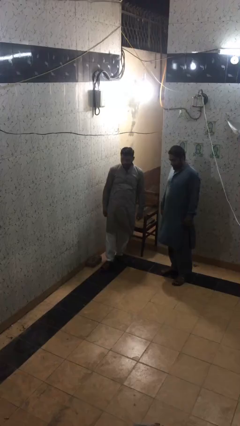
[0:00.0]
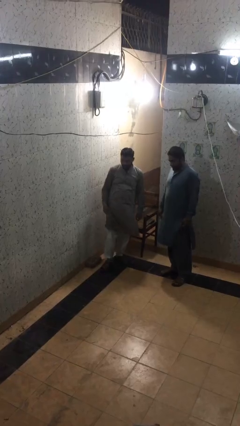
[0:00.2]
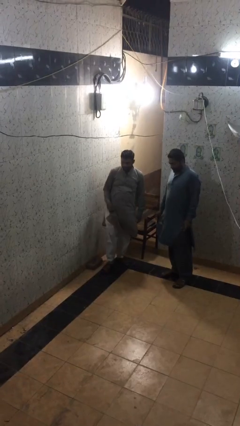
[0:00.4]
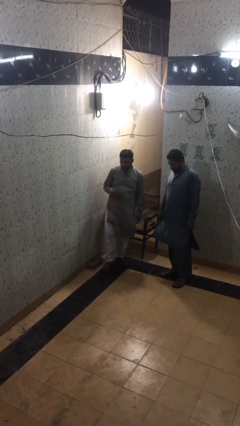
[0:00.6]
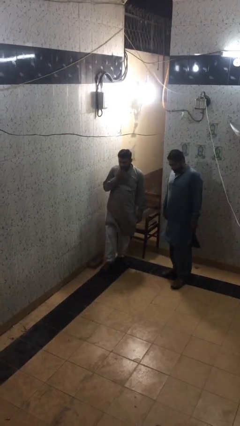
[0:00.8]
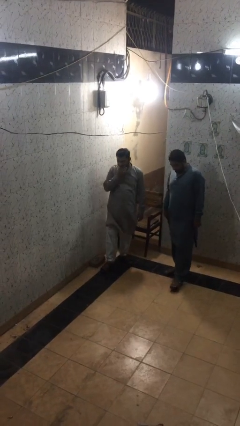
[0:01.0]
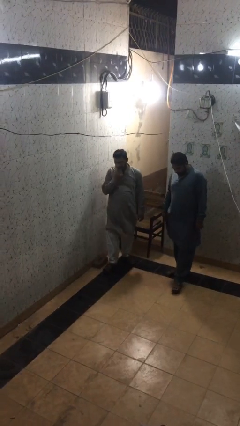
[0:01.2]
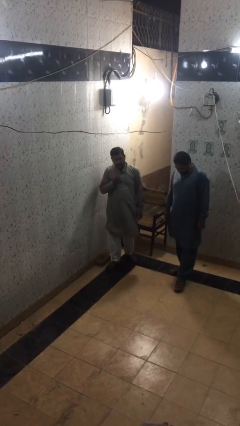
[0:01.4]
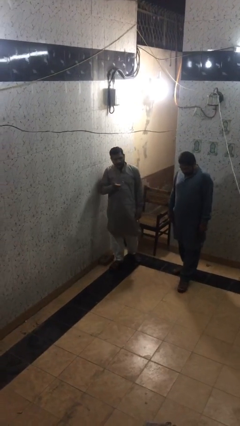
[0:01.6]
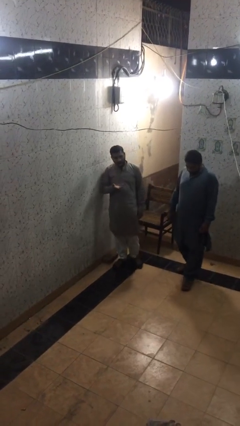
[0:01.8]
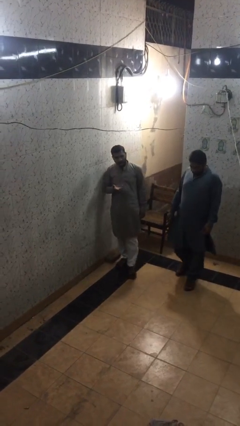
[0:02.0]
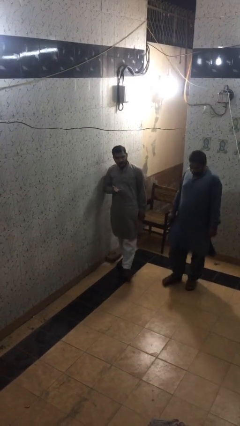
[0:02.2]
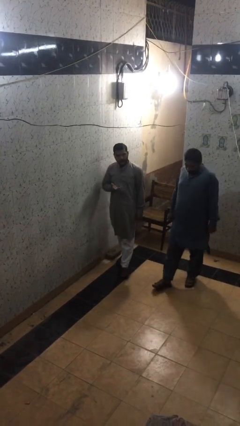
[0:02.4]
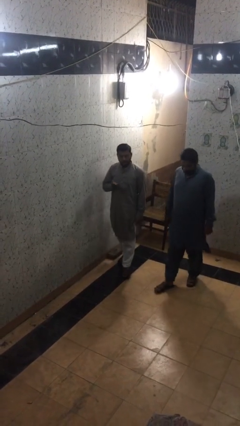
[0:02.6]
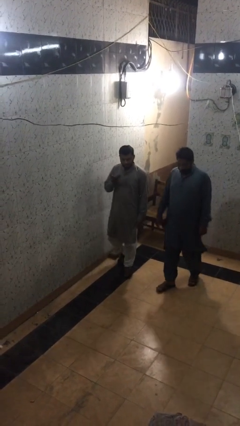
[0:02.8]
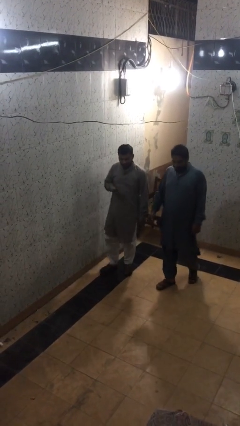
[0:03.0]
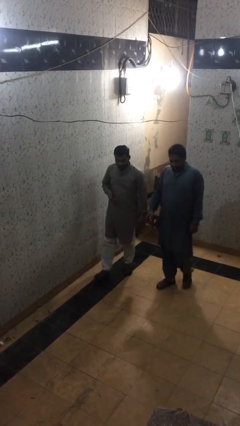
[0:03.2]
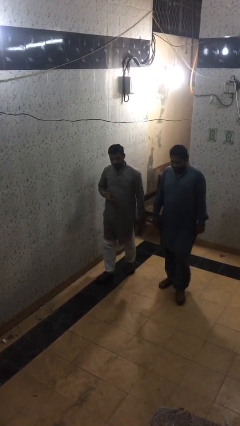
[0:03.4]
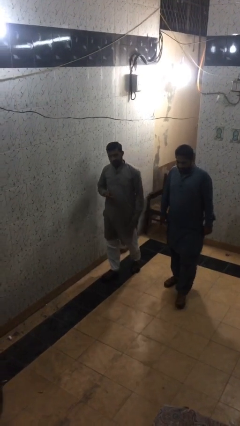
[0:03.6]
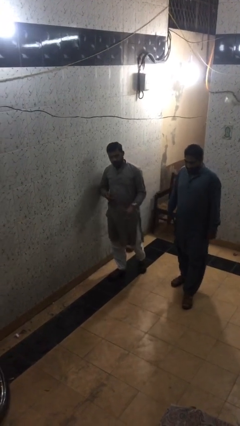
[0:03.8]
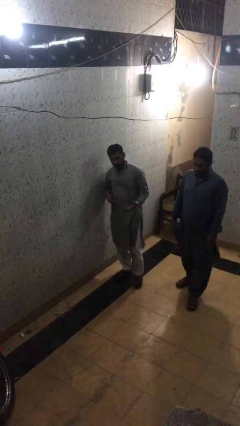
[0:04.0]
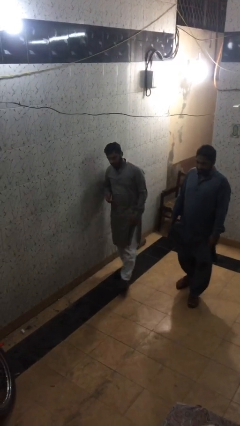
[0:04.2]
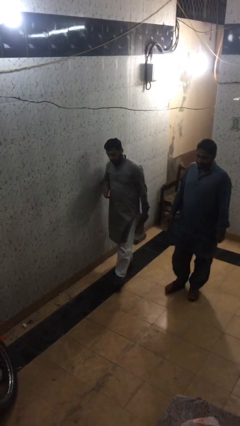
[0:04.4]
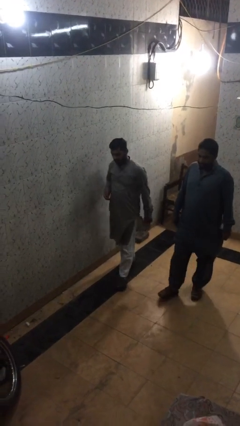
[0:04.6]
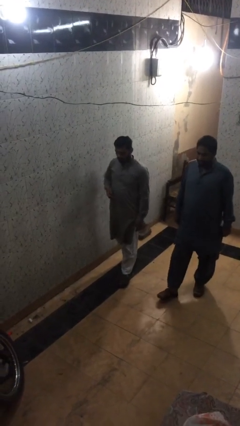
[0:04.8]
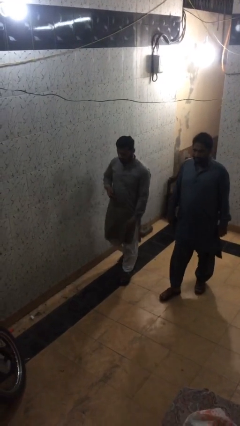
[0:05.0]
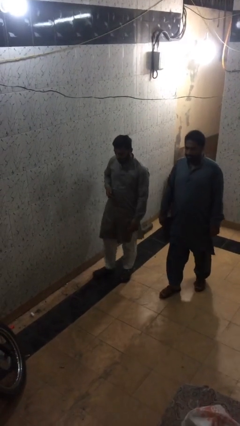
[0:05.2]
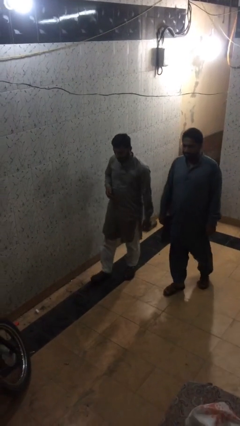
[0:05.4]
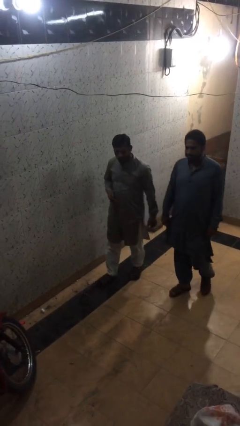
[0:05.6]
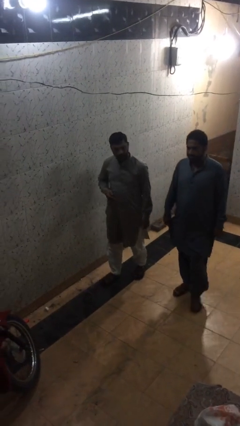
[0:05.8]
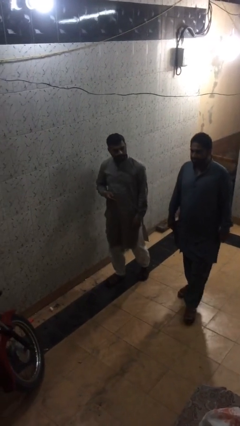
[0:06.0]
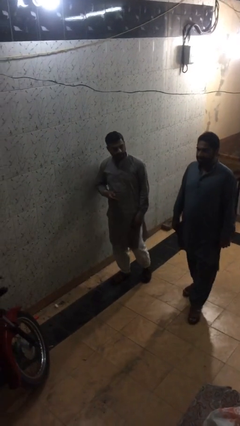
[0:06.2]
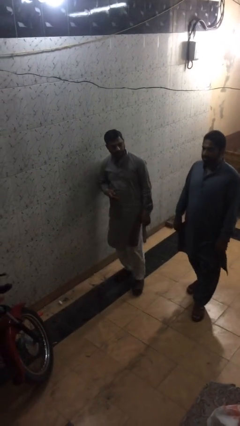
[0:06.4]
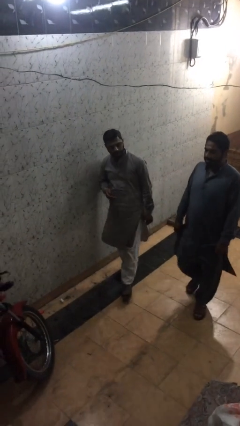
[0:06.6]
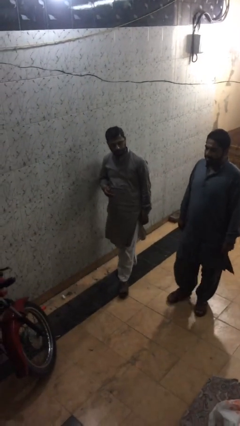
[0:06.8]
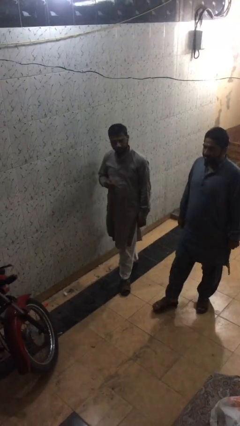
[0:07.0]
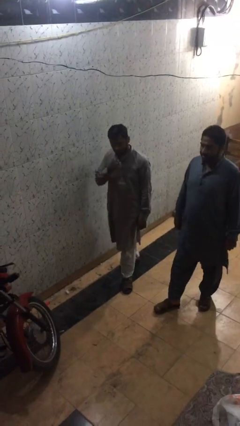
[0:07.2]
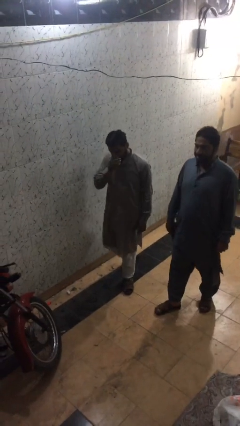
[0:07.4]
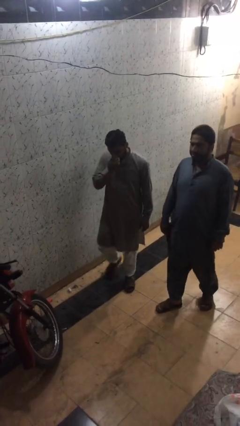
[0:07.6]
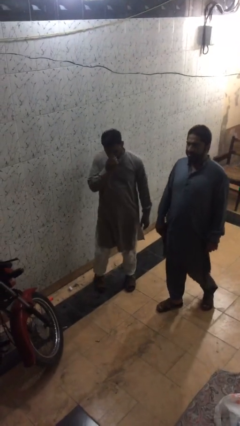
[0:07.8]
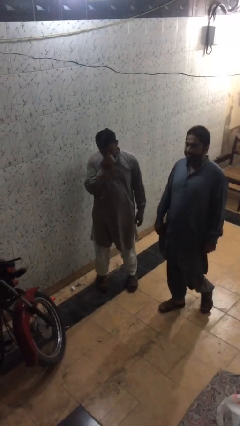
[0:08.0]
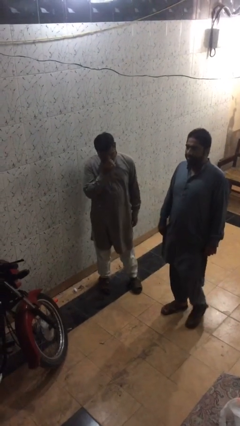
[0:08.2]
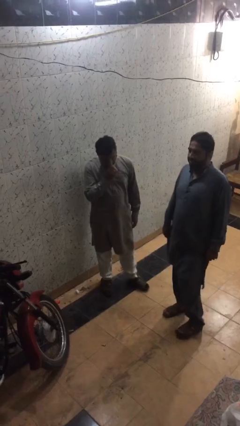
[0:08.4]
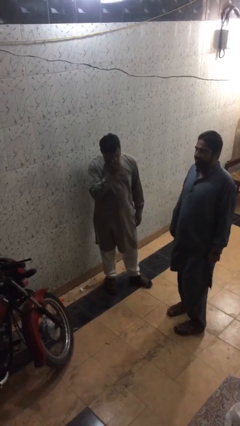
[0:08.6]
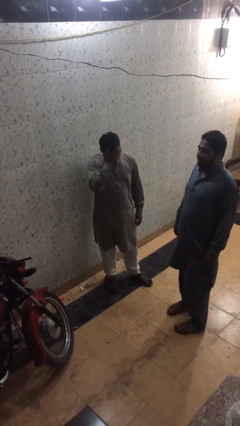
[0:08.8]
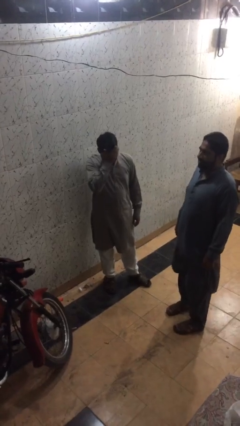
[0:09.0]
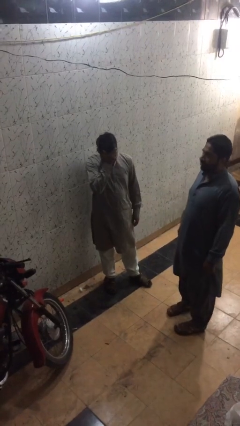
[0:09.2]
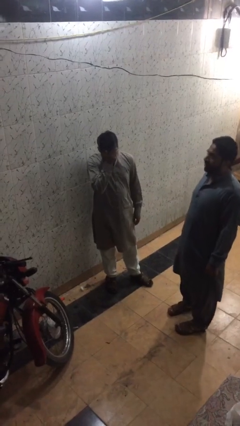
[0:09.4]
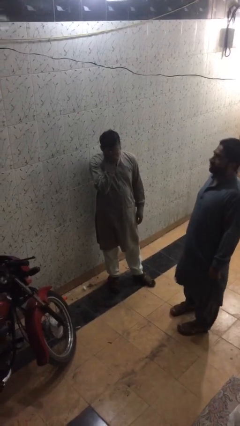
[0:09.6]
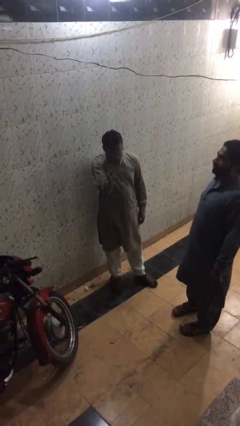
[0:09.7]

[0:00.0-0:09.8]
person talks to person

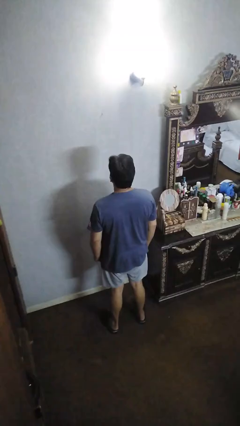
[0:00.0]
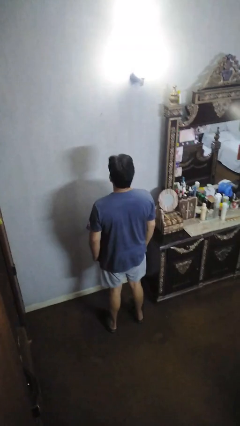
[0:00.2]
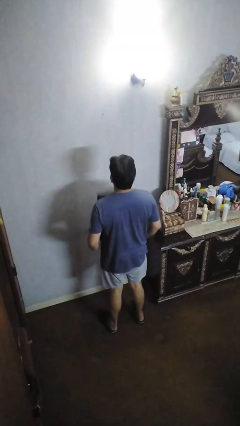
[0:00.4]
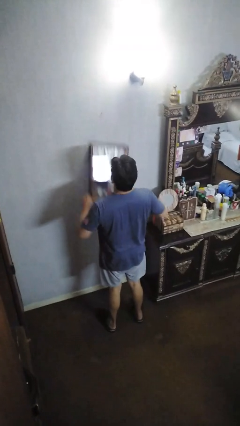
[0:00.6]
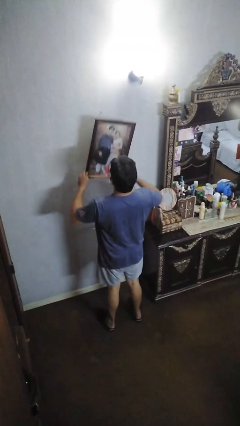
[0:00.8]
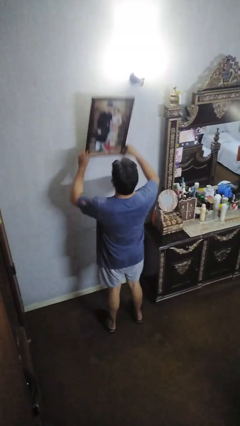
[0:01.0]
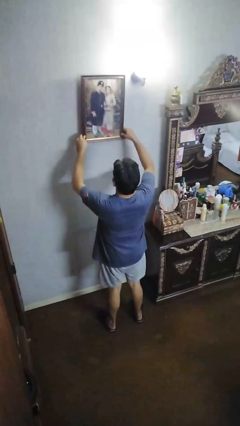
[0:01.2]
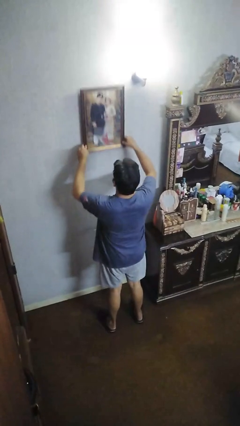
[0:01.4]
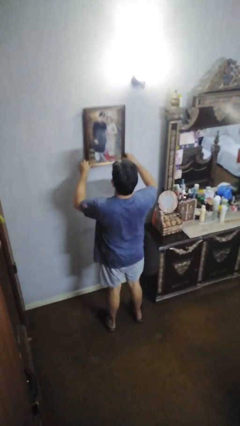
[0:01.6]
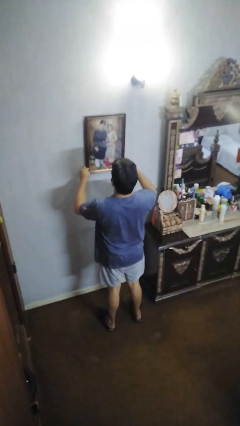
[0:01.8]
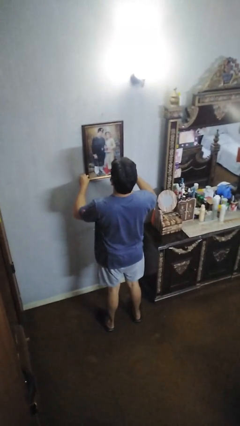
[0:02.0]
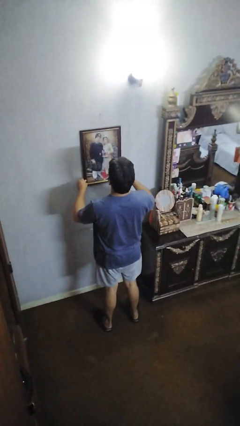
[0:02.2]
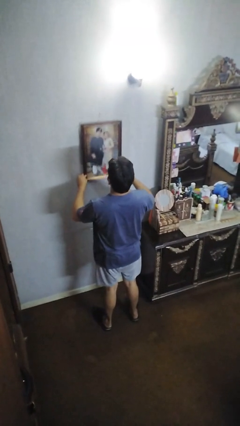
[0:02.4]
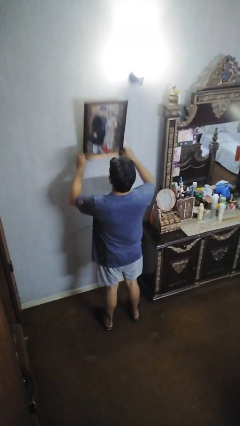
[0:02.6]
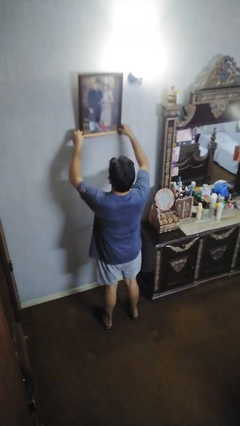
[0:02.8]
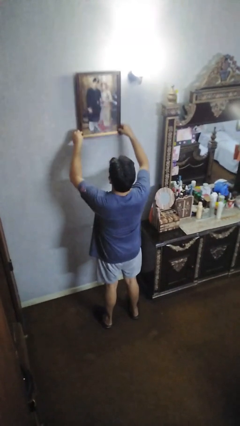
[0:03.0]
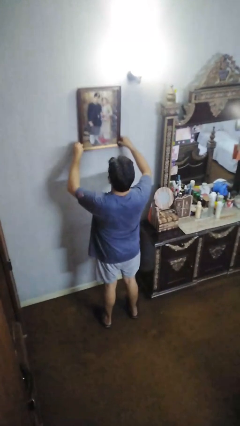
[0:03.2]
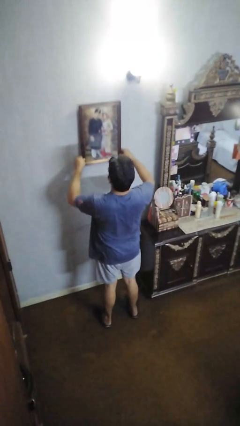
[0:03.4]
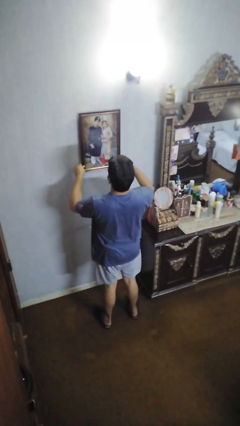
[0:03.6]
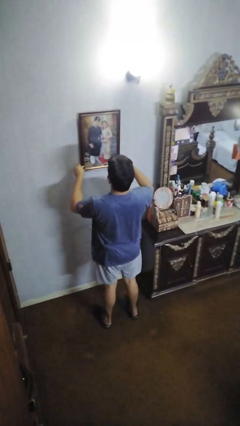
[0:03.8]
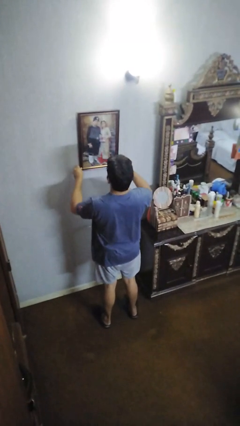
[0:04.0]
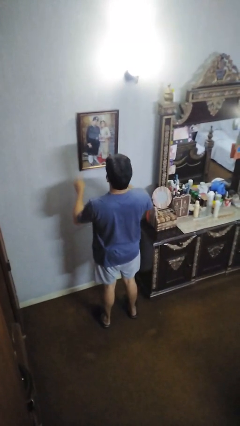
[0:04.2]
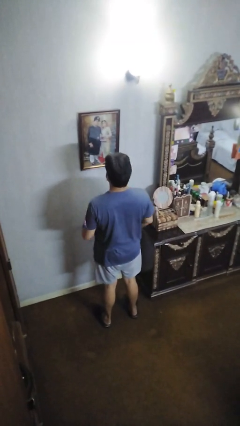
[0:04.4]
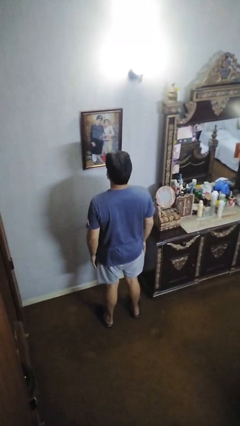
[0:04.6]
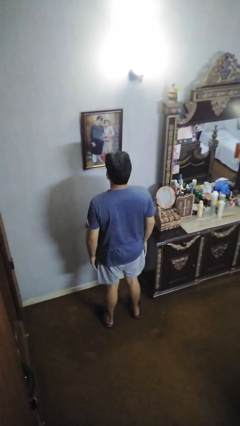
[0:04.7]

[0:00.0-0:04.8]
person puts up picture frame

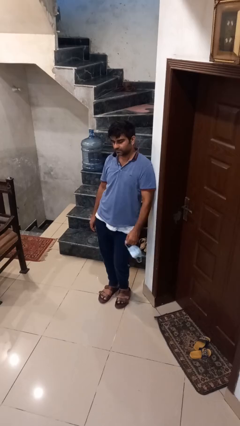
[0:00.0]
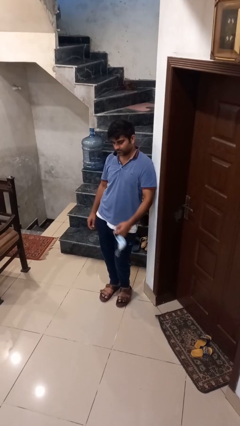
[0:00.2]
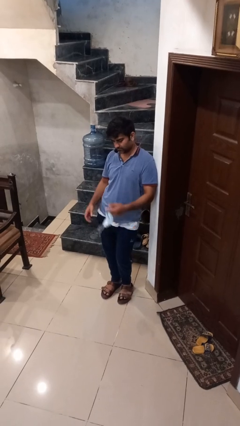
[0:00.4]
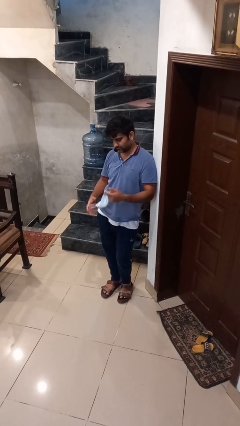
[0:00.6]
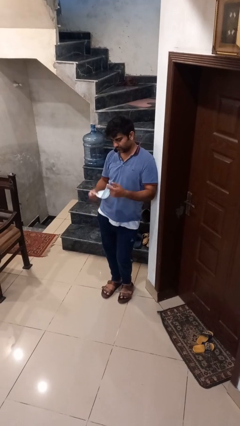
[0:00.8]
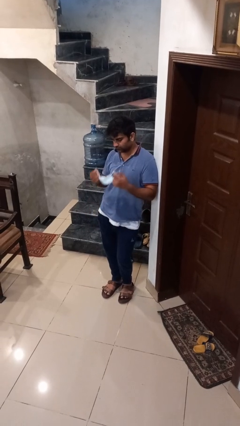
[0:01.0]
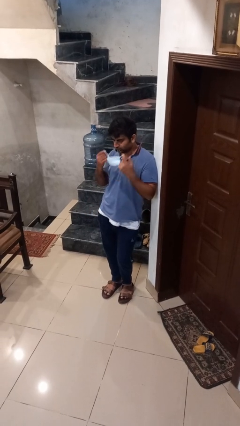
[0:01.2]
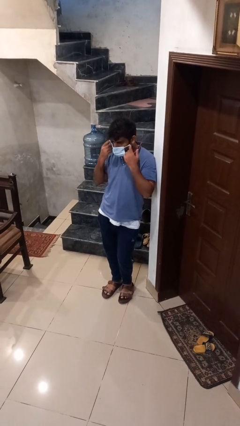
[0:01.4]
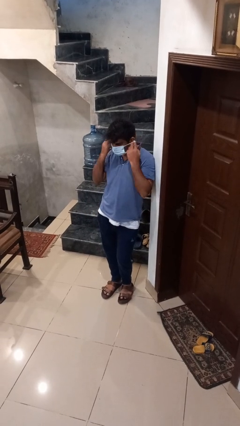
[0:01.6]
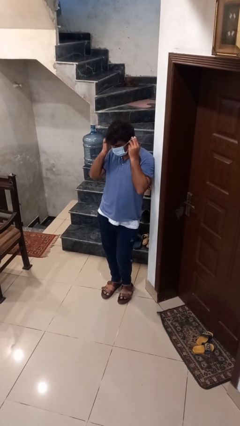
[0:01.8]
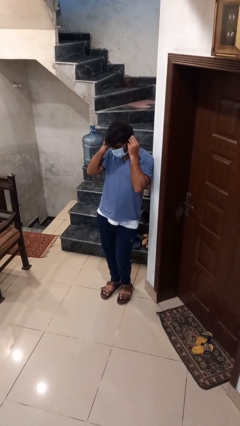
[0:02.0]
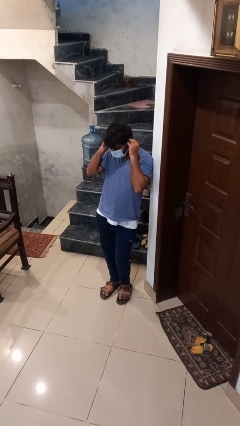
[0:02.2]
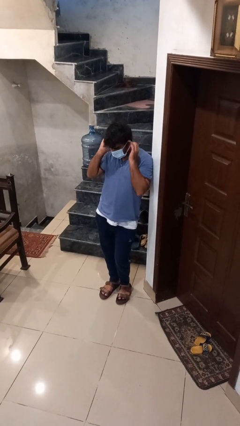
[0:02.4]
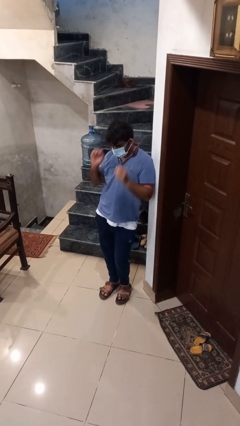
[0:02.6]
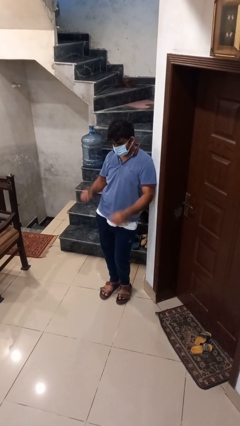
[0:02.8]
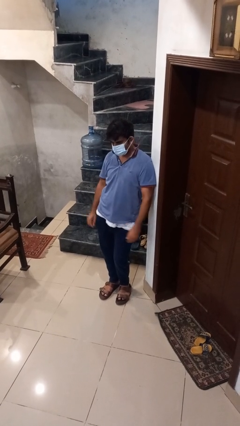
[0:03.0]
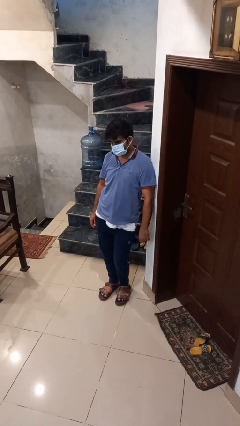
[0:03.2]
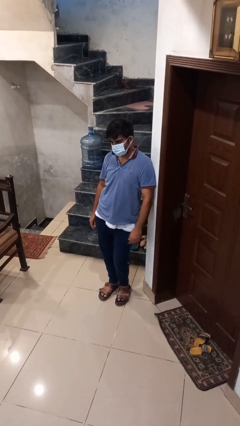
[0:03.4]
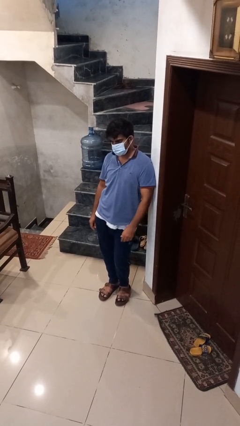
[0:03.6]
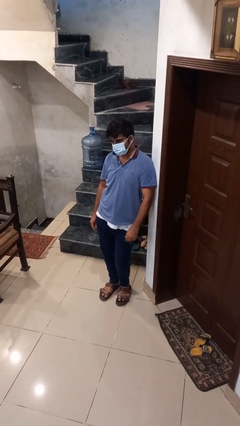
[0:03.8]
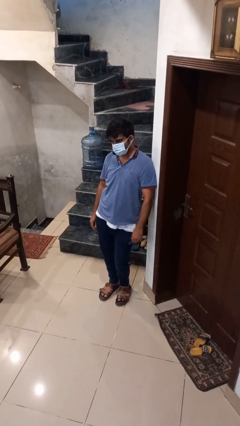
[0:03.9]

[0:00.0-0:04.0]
person puts on facemask
